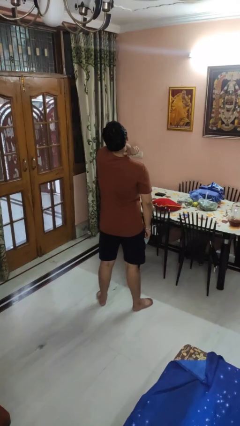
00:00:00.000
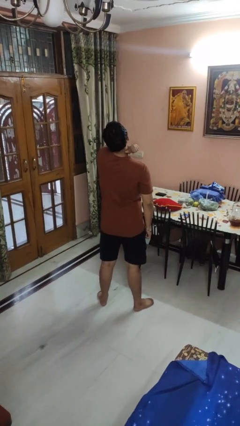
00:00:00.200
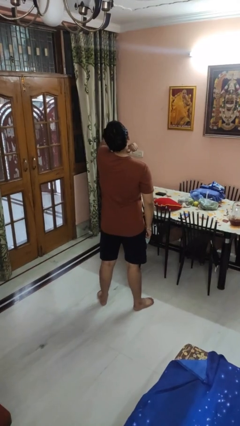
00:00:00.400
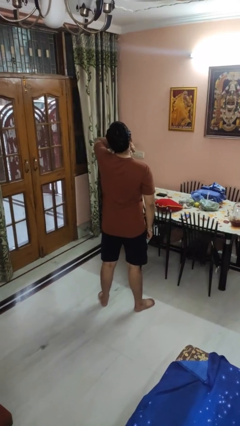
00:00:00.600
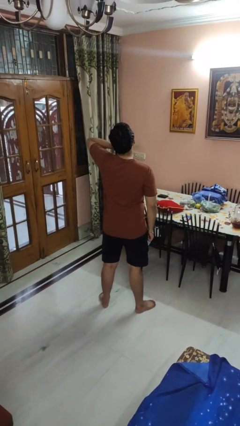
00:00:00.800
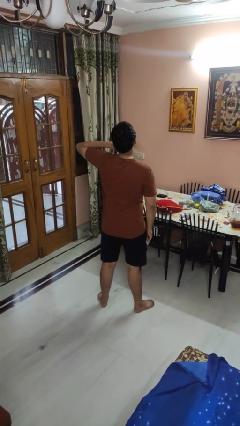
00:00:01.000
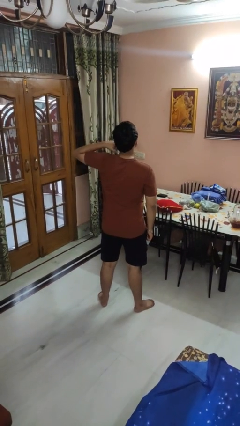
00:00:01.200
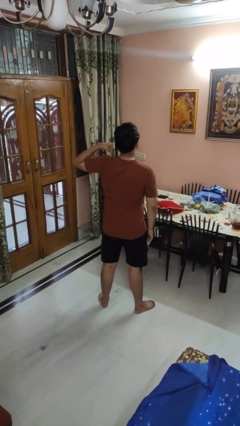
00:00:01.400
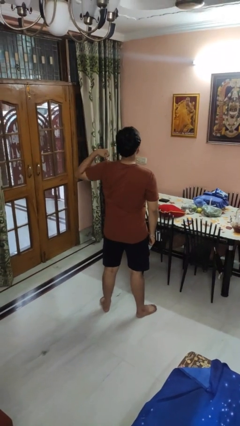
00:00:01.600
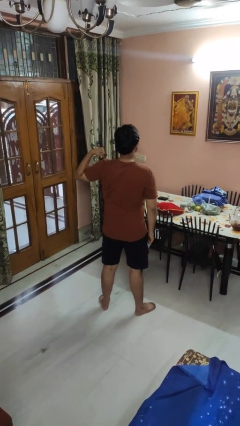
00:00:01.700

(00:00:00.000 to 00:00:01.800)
person gestures cut

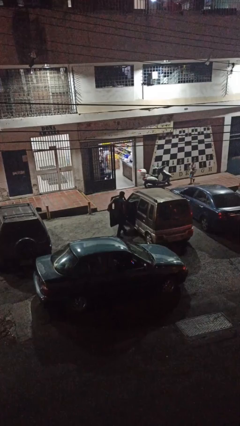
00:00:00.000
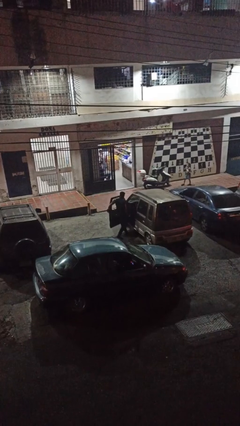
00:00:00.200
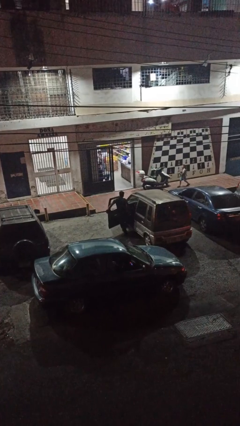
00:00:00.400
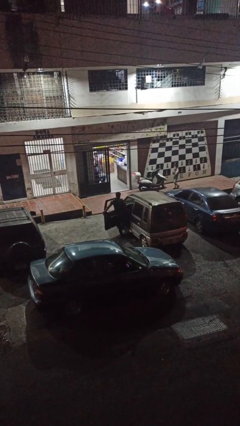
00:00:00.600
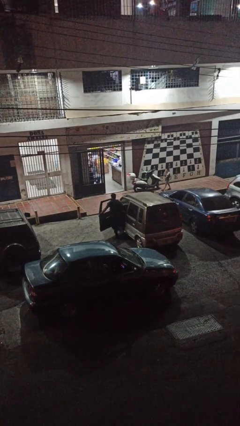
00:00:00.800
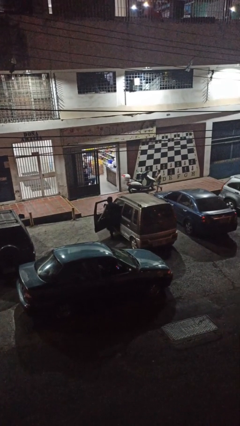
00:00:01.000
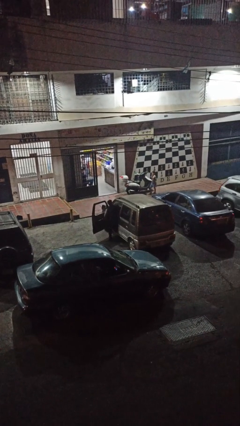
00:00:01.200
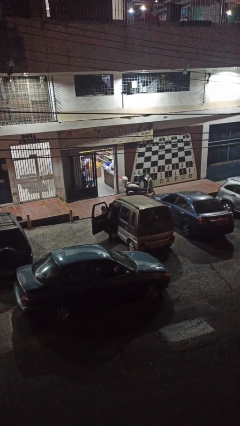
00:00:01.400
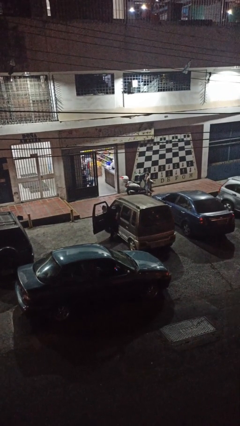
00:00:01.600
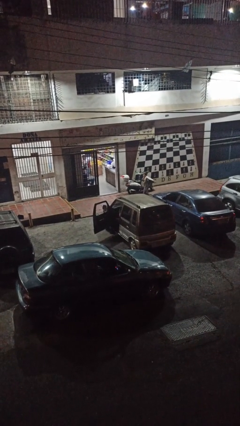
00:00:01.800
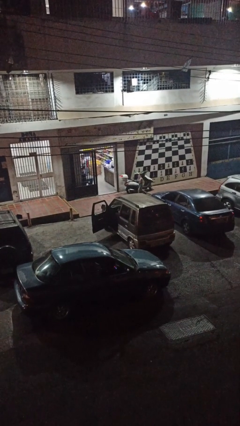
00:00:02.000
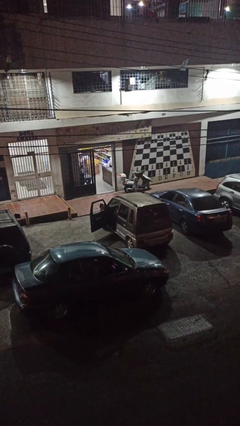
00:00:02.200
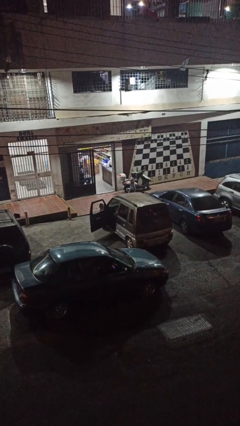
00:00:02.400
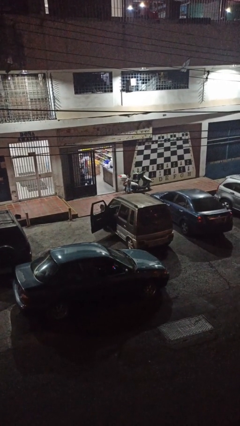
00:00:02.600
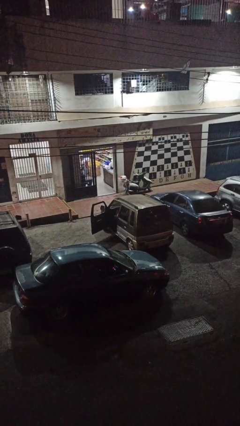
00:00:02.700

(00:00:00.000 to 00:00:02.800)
person enters car

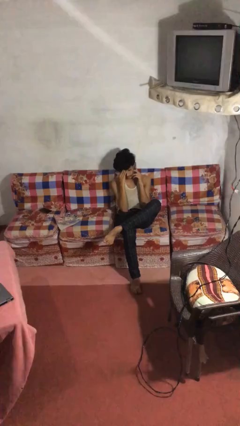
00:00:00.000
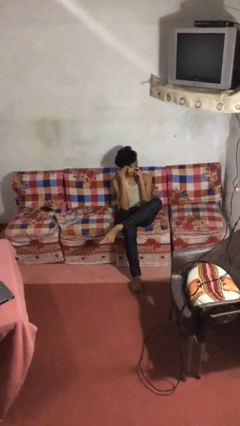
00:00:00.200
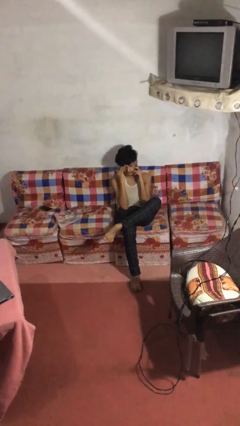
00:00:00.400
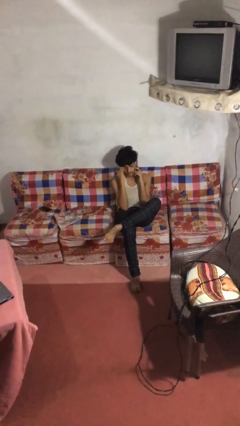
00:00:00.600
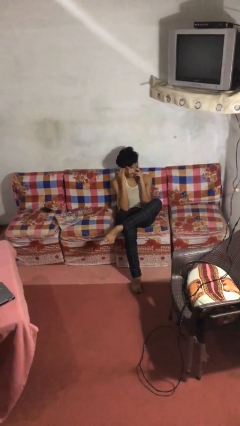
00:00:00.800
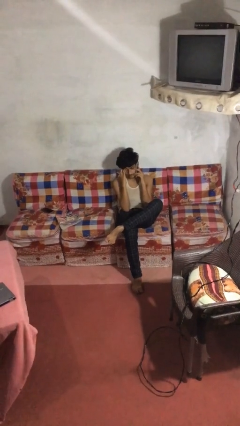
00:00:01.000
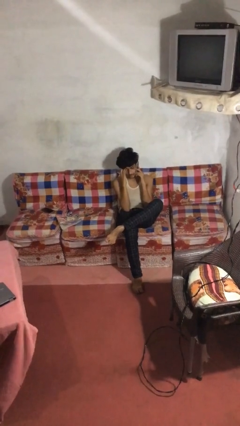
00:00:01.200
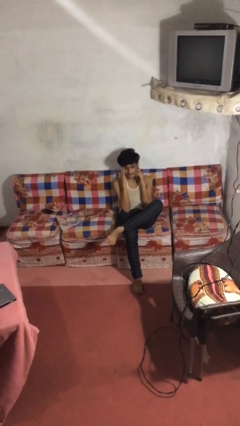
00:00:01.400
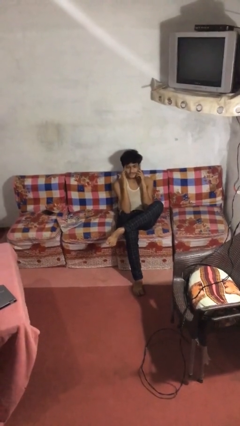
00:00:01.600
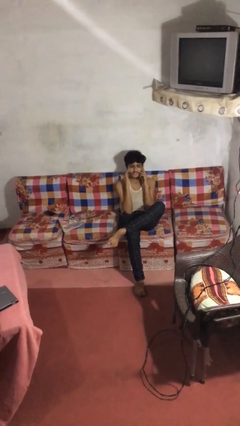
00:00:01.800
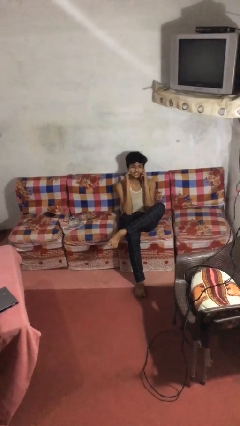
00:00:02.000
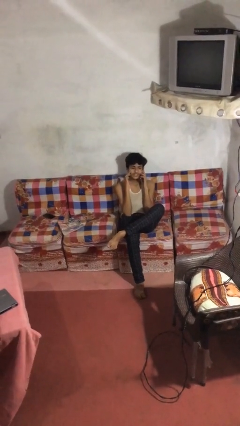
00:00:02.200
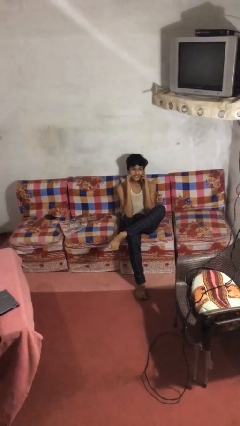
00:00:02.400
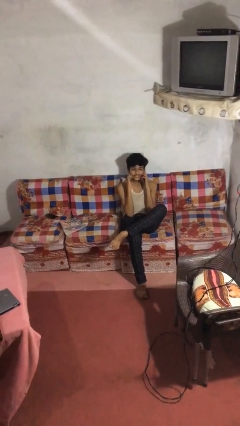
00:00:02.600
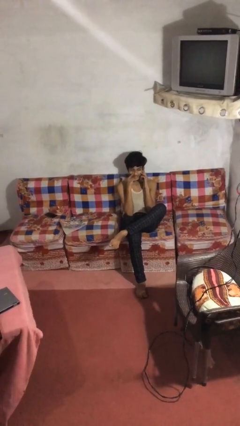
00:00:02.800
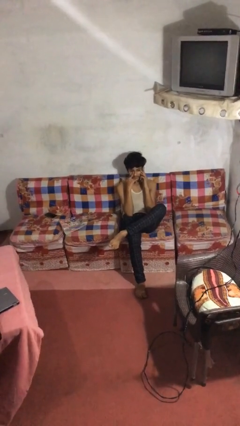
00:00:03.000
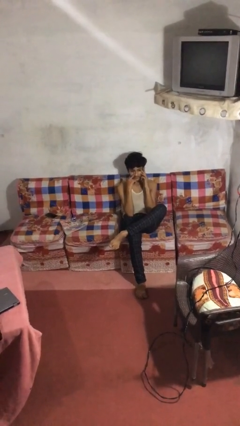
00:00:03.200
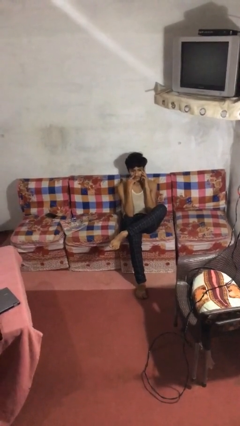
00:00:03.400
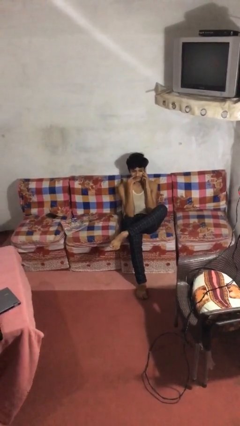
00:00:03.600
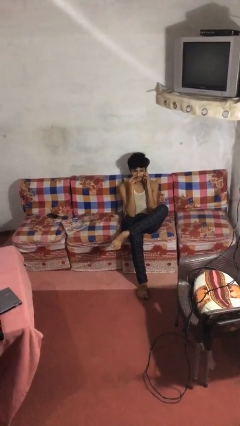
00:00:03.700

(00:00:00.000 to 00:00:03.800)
person talks on phone

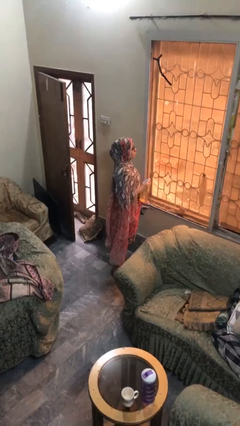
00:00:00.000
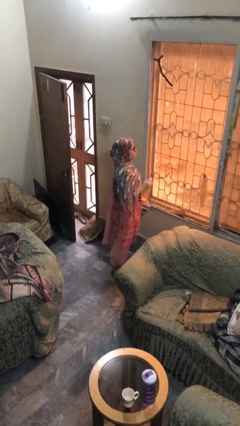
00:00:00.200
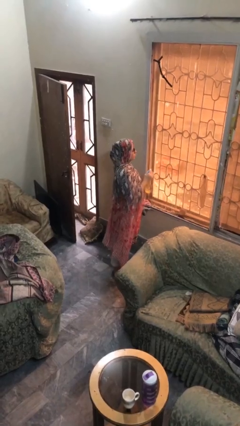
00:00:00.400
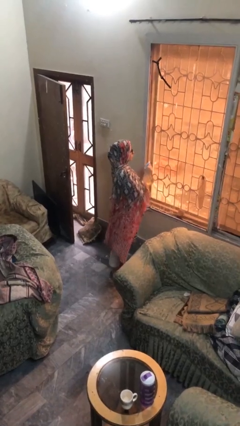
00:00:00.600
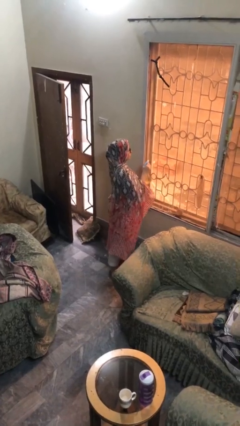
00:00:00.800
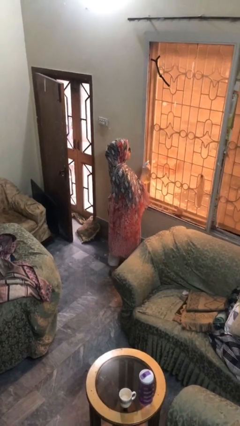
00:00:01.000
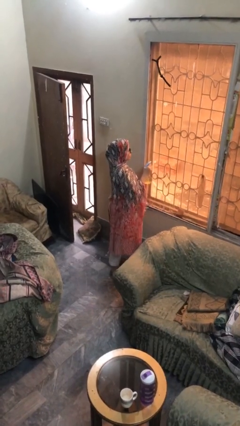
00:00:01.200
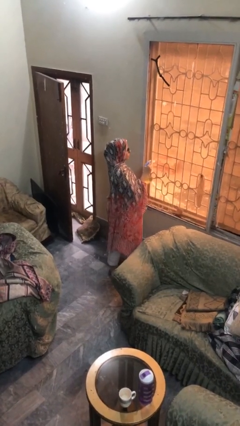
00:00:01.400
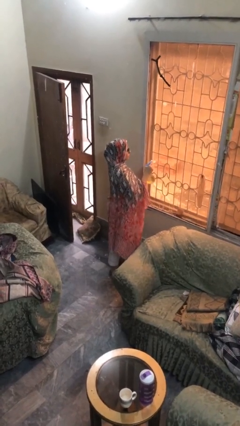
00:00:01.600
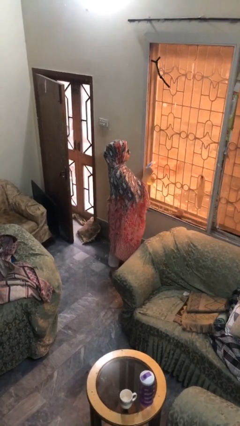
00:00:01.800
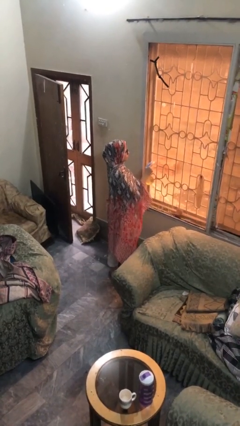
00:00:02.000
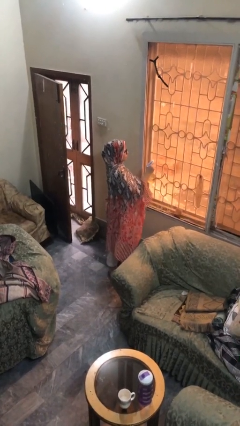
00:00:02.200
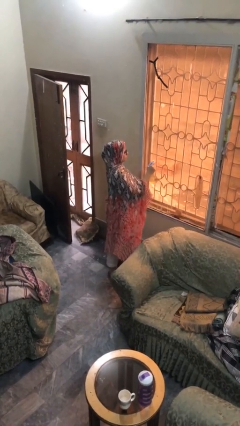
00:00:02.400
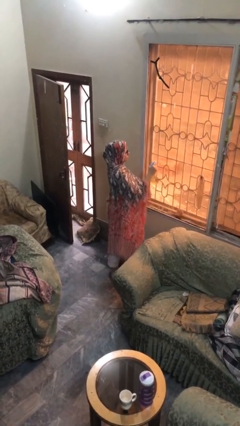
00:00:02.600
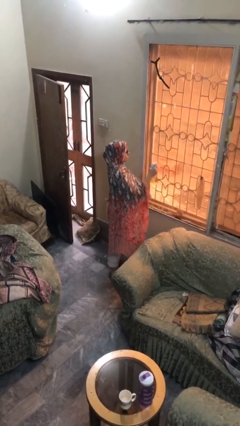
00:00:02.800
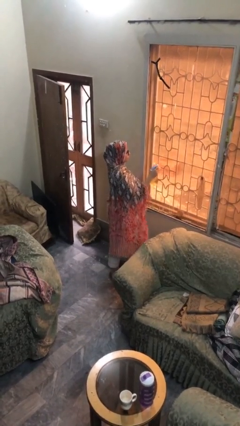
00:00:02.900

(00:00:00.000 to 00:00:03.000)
person sprays from bottle

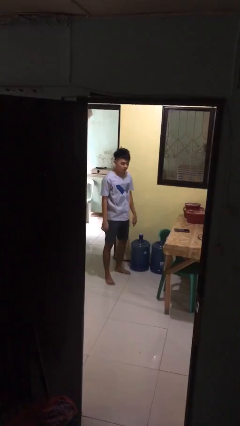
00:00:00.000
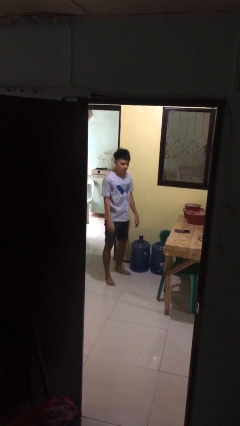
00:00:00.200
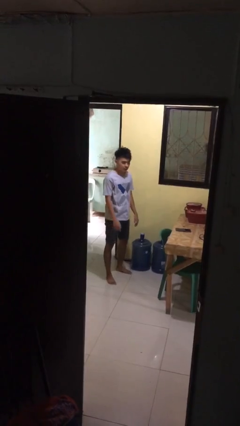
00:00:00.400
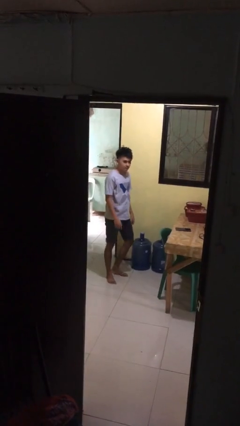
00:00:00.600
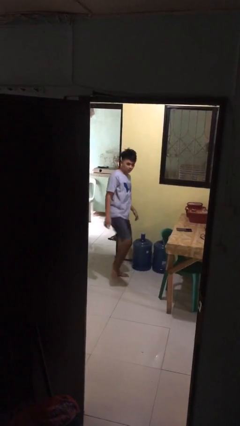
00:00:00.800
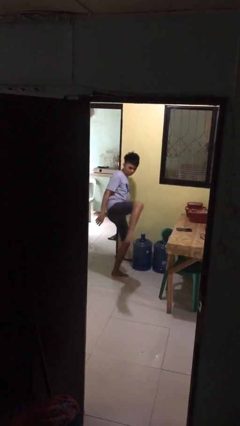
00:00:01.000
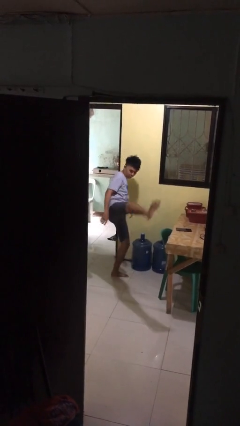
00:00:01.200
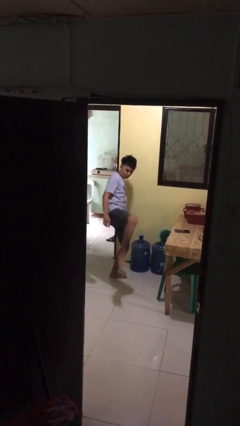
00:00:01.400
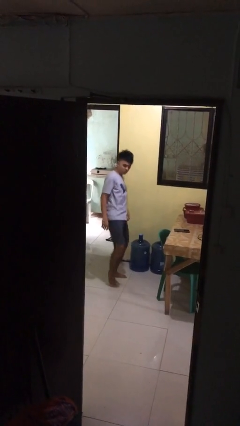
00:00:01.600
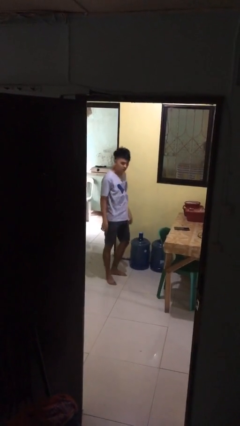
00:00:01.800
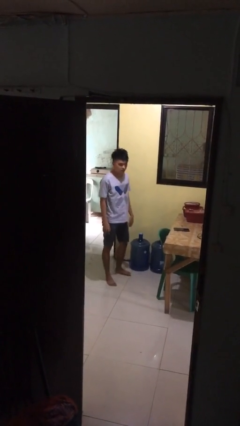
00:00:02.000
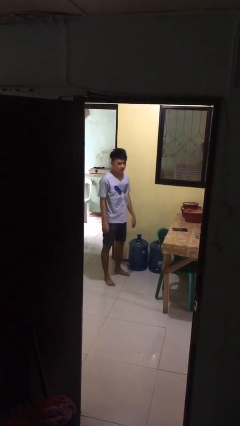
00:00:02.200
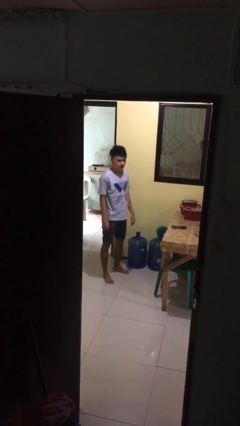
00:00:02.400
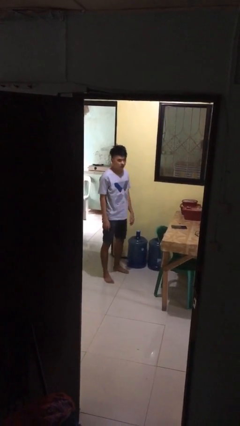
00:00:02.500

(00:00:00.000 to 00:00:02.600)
person karate kicks

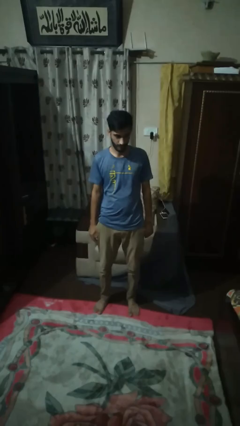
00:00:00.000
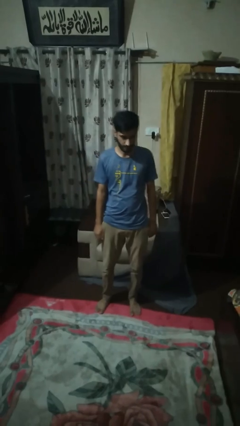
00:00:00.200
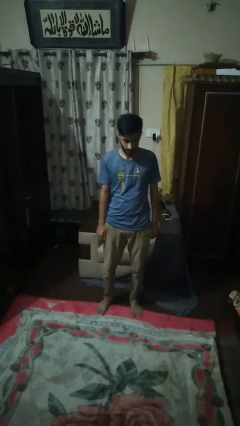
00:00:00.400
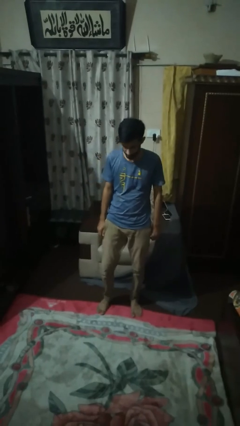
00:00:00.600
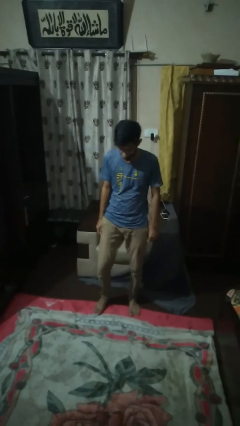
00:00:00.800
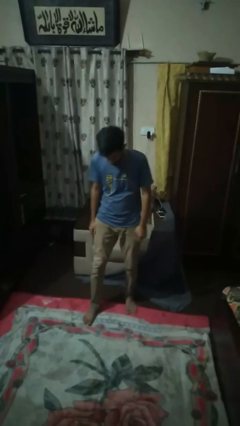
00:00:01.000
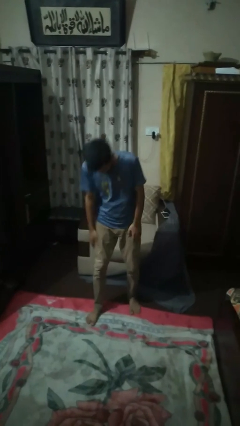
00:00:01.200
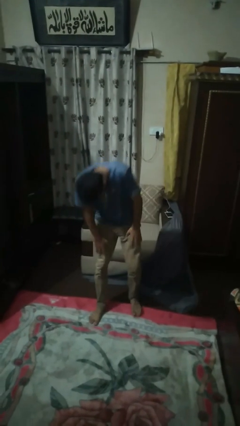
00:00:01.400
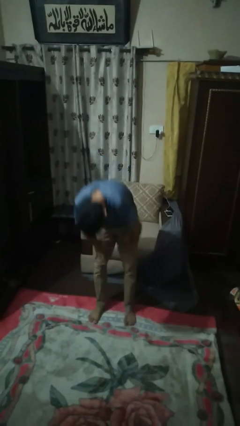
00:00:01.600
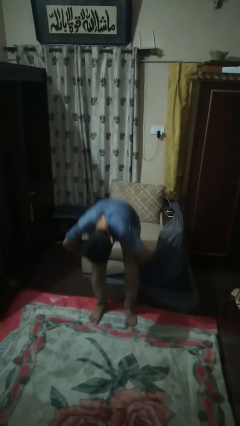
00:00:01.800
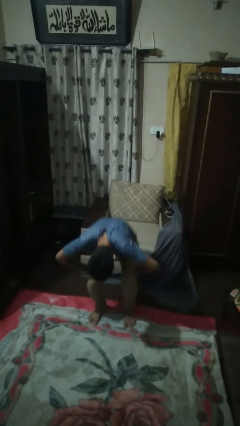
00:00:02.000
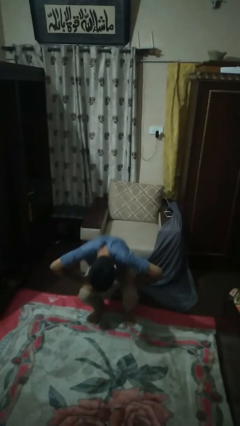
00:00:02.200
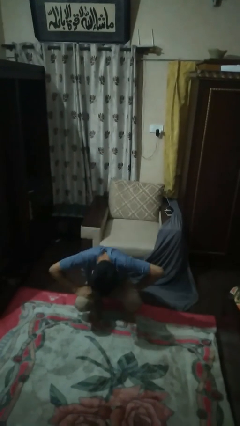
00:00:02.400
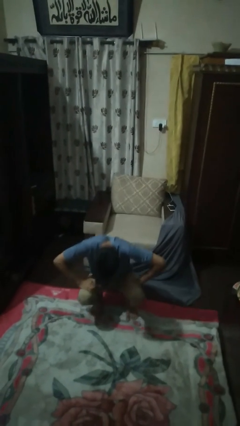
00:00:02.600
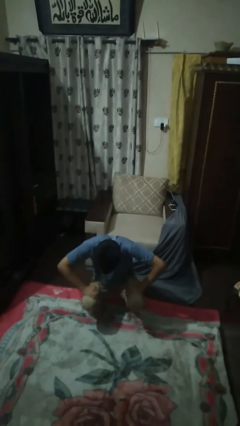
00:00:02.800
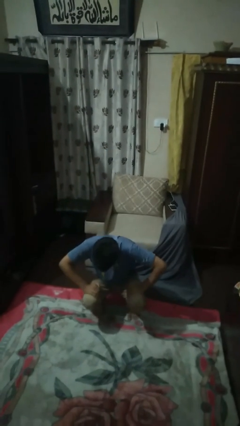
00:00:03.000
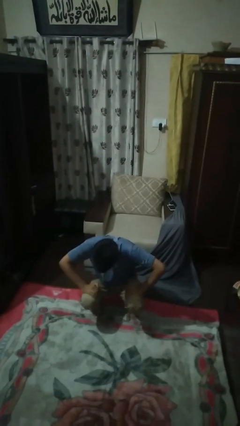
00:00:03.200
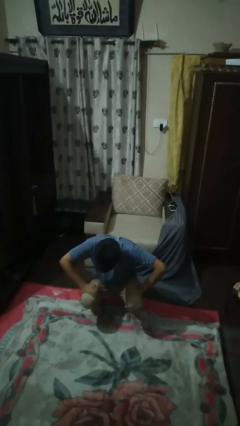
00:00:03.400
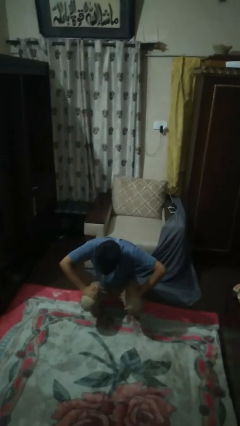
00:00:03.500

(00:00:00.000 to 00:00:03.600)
person squats
